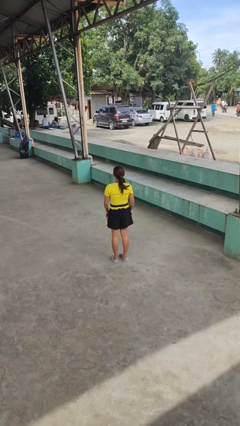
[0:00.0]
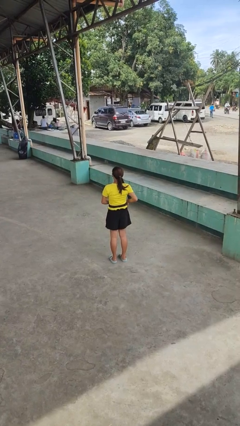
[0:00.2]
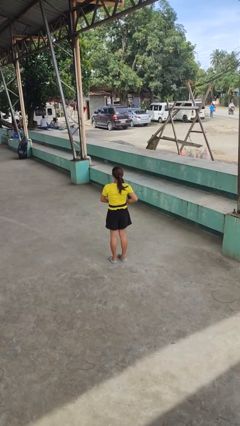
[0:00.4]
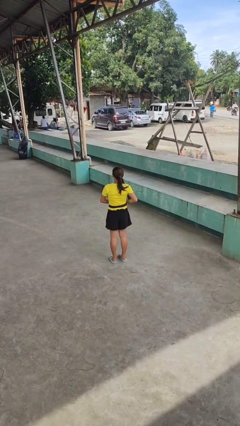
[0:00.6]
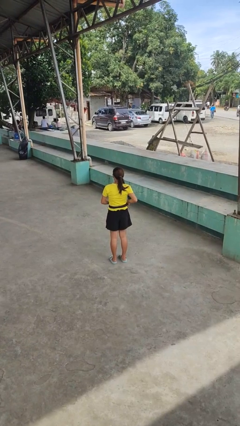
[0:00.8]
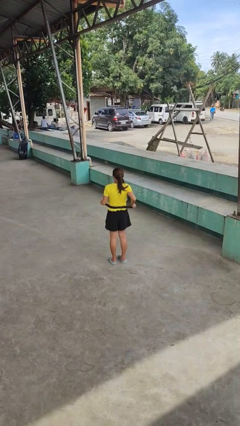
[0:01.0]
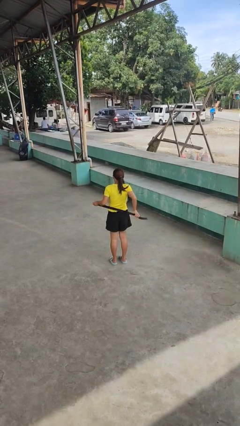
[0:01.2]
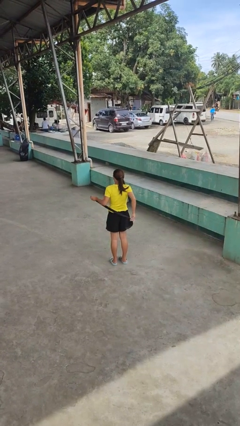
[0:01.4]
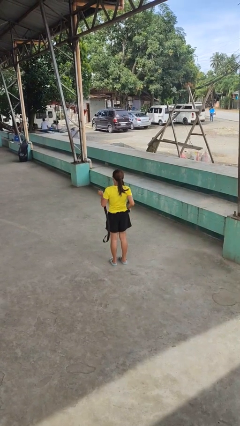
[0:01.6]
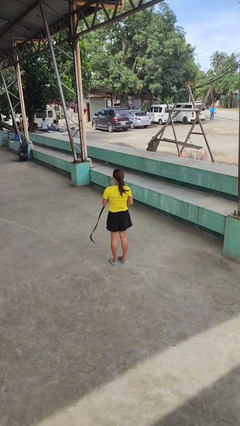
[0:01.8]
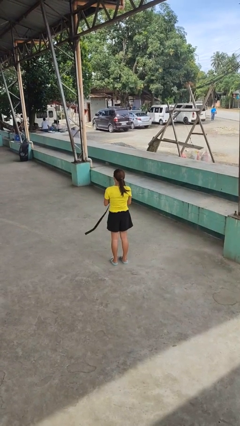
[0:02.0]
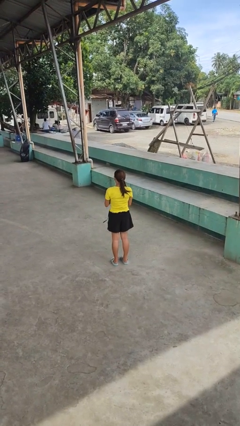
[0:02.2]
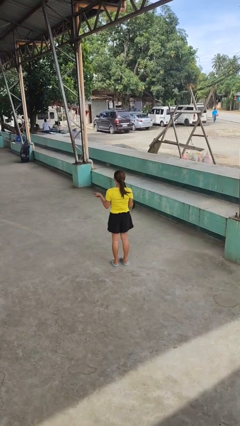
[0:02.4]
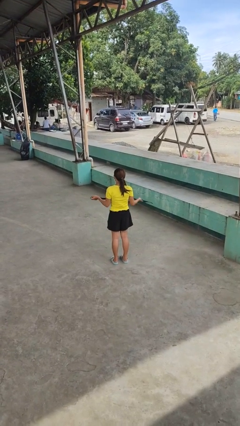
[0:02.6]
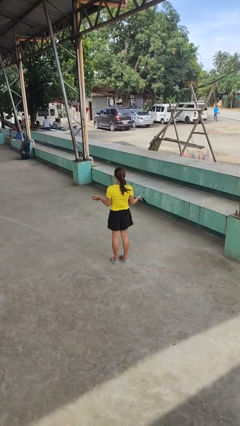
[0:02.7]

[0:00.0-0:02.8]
person takes off belt

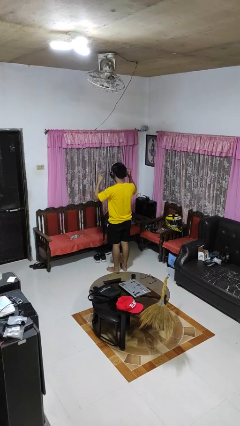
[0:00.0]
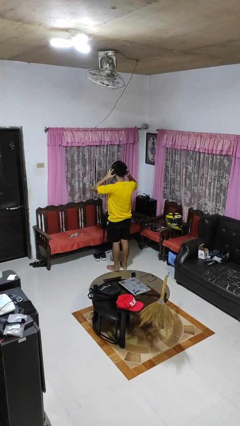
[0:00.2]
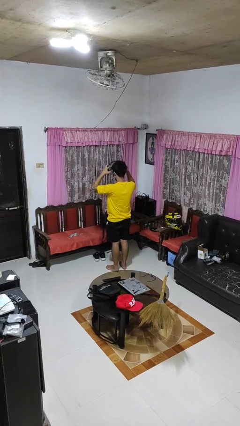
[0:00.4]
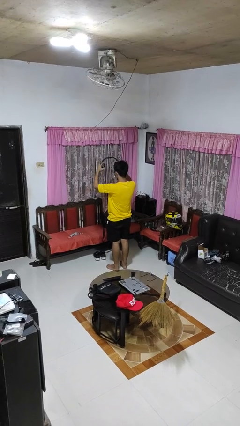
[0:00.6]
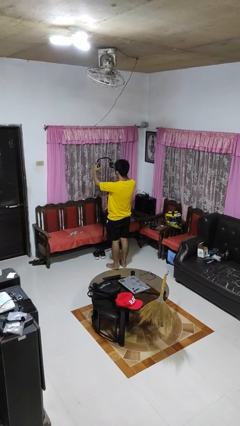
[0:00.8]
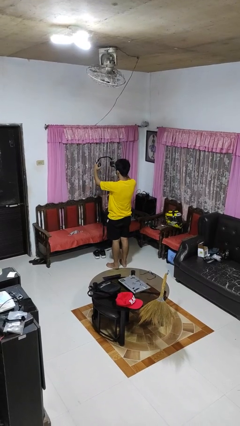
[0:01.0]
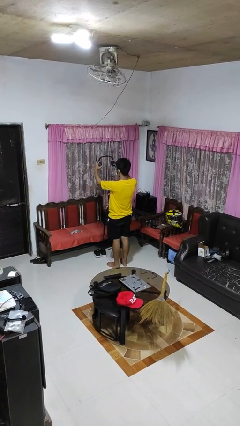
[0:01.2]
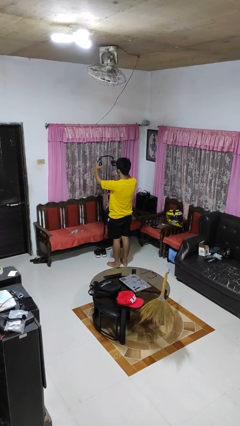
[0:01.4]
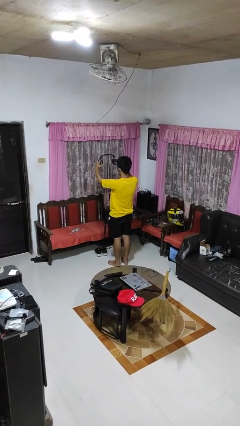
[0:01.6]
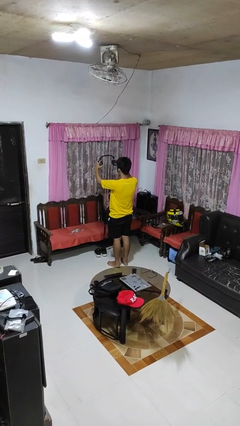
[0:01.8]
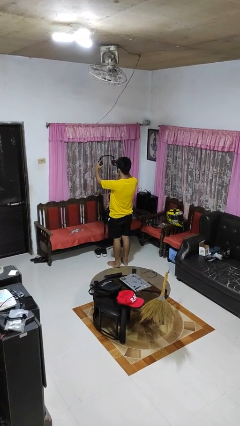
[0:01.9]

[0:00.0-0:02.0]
person takes off headphones

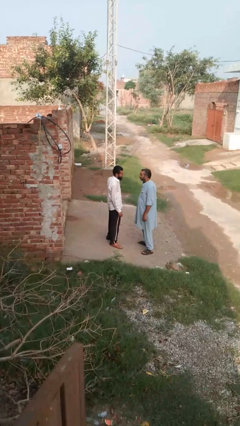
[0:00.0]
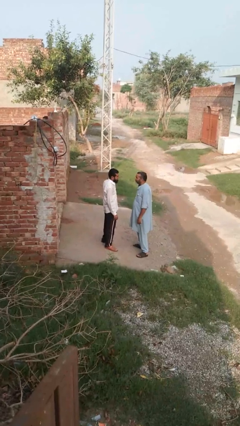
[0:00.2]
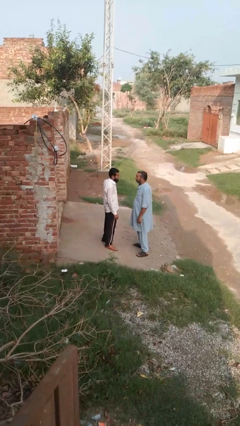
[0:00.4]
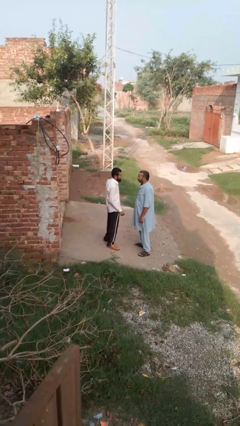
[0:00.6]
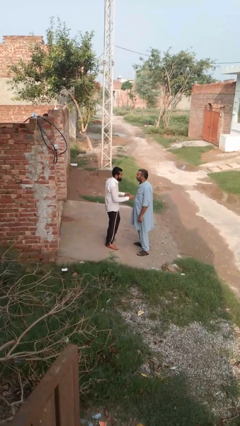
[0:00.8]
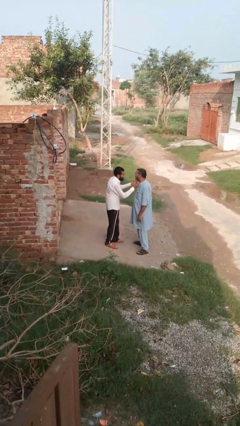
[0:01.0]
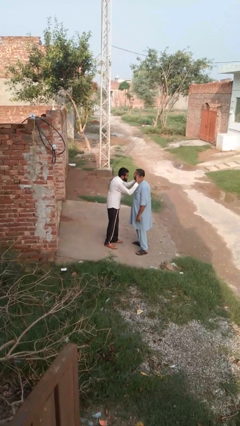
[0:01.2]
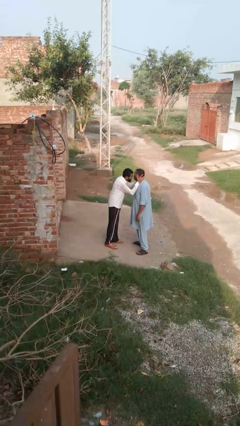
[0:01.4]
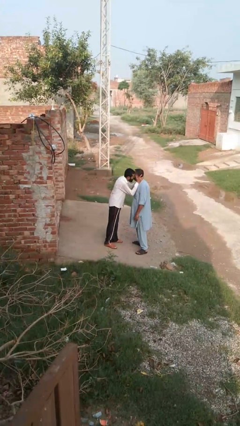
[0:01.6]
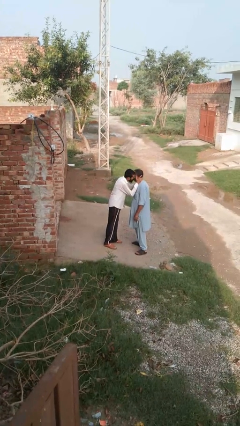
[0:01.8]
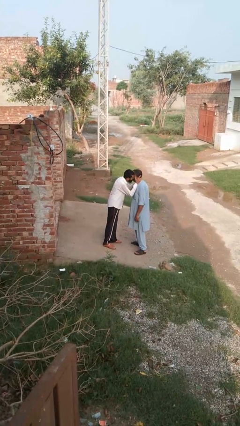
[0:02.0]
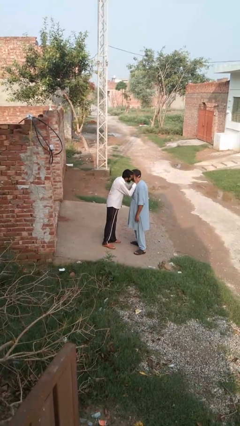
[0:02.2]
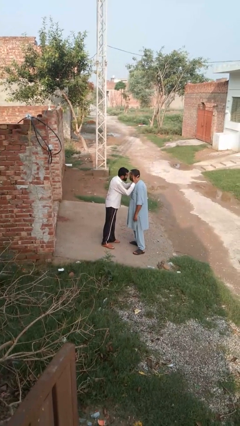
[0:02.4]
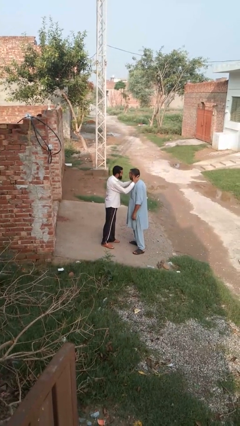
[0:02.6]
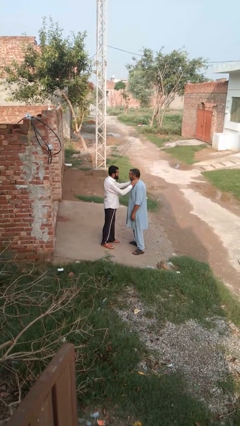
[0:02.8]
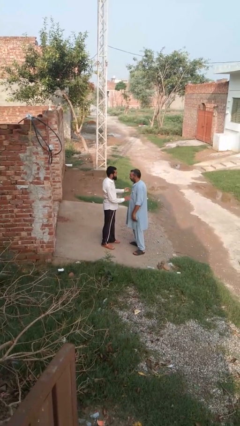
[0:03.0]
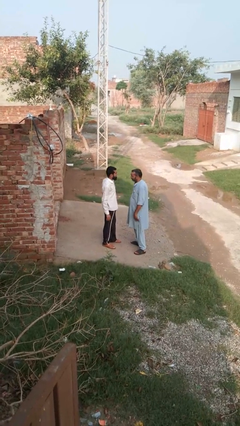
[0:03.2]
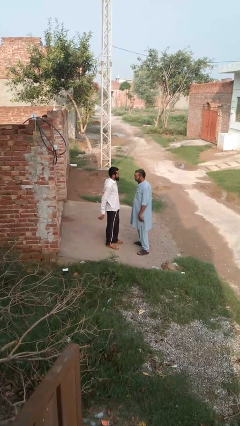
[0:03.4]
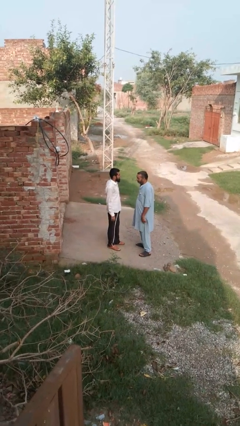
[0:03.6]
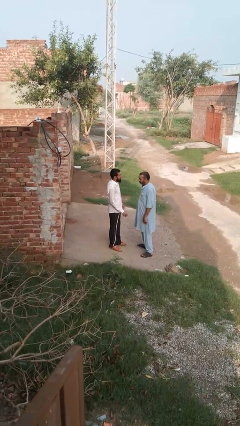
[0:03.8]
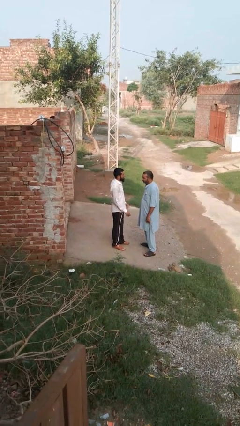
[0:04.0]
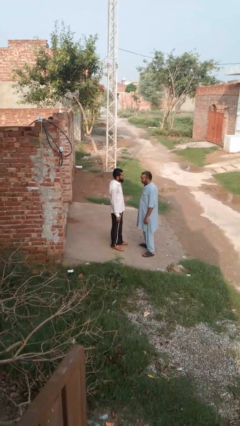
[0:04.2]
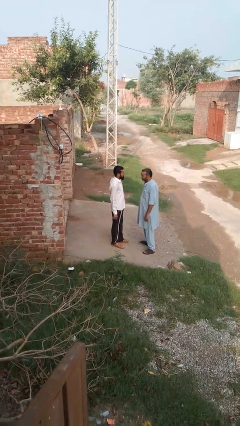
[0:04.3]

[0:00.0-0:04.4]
person kisses cheek of person

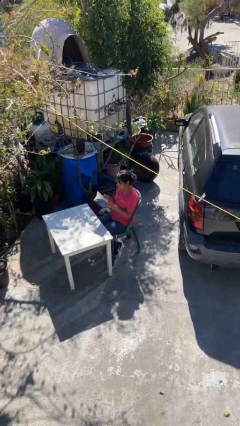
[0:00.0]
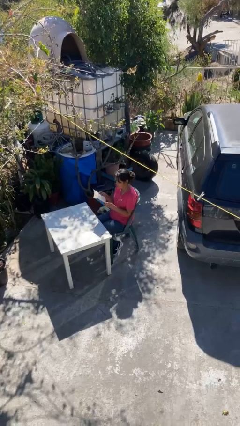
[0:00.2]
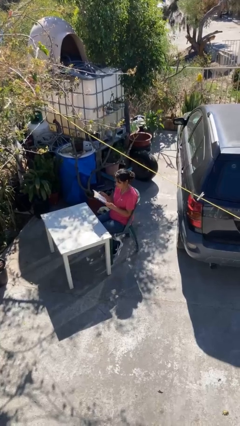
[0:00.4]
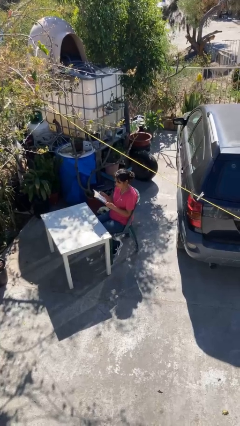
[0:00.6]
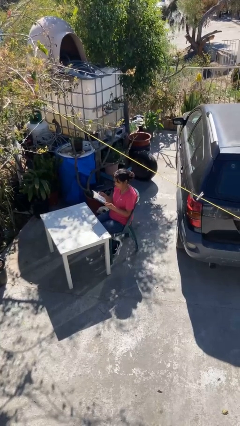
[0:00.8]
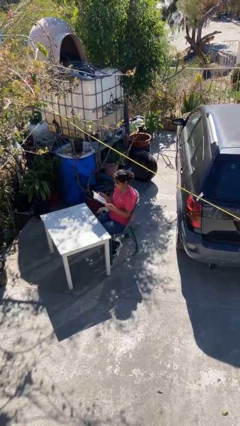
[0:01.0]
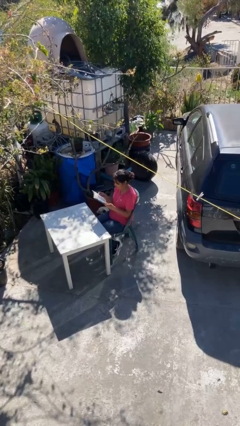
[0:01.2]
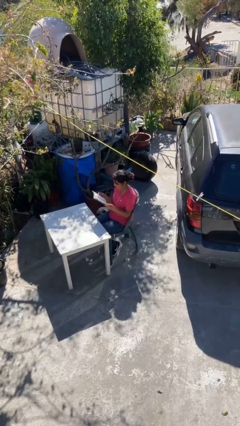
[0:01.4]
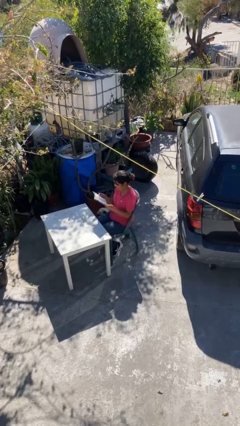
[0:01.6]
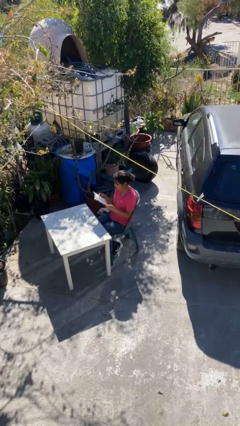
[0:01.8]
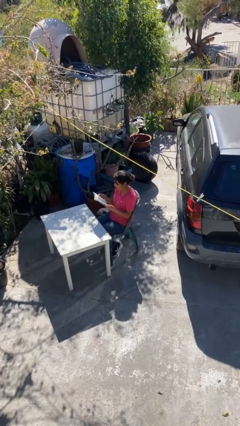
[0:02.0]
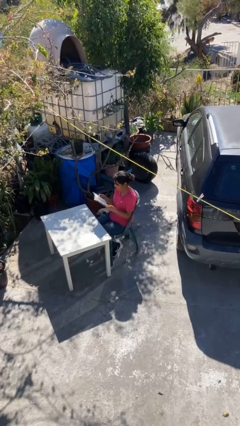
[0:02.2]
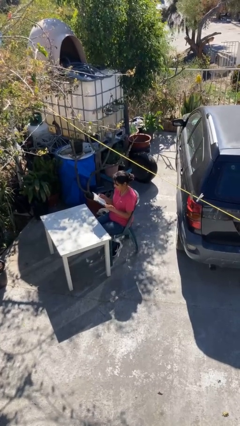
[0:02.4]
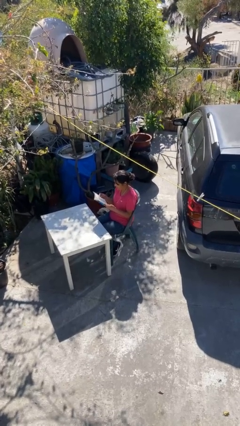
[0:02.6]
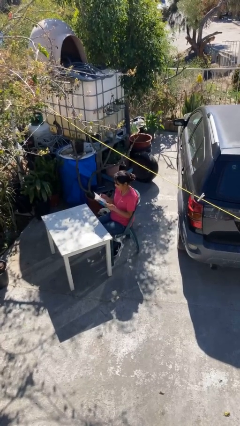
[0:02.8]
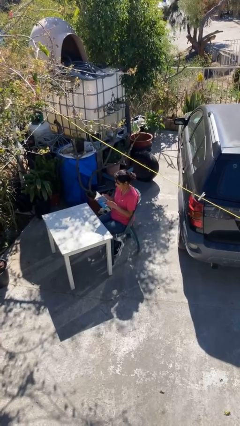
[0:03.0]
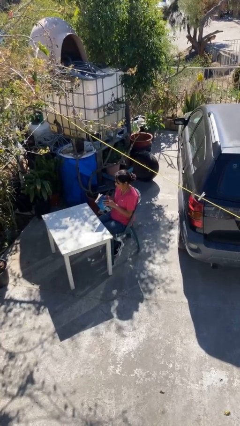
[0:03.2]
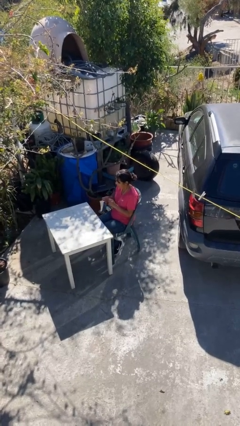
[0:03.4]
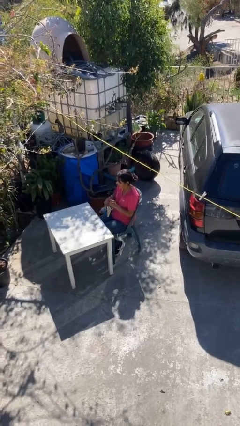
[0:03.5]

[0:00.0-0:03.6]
person reads document

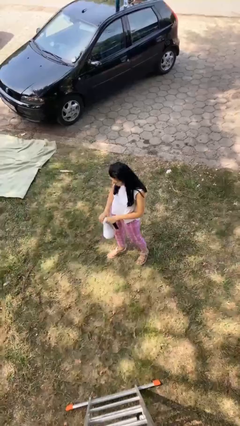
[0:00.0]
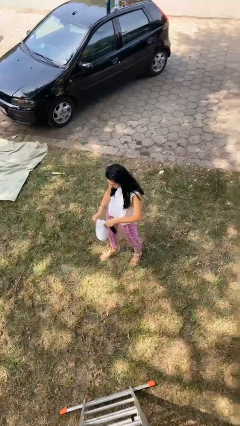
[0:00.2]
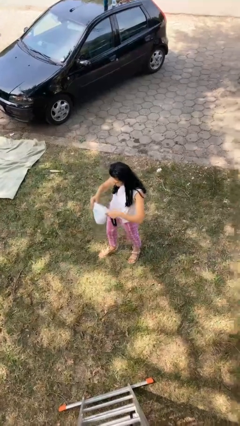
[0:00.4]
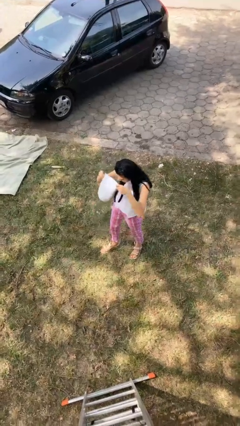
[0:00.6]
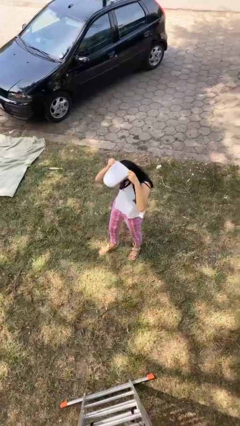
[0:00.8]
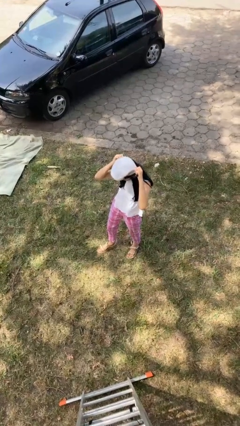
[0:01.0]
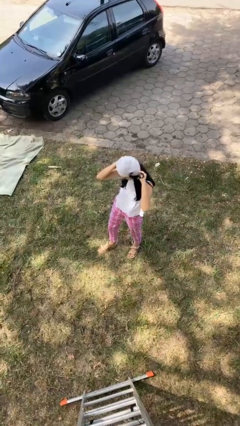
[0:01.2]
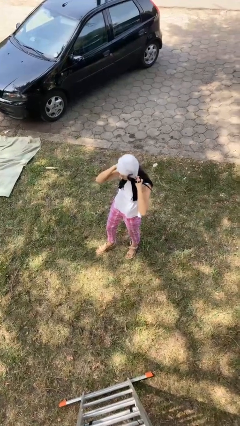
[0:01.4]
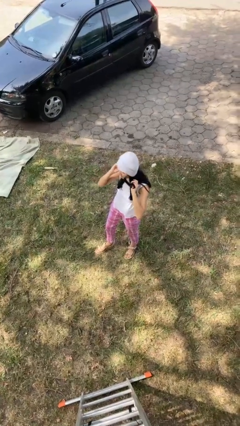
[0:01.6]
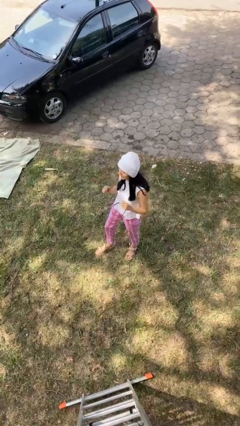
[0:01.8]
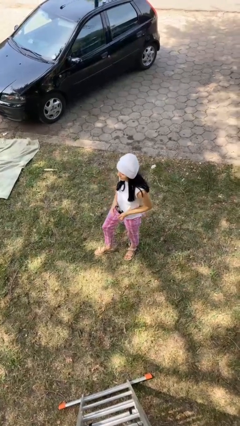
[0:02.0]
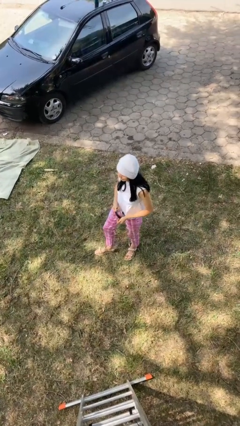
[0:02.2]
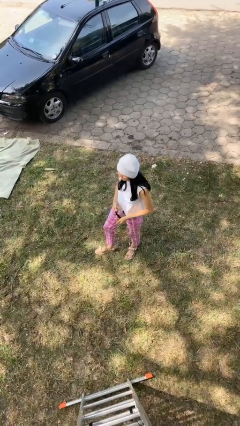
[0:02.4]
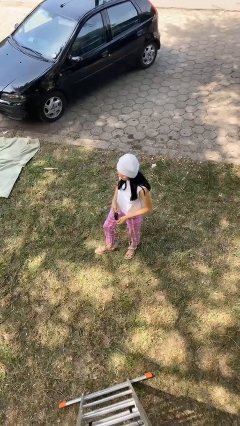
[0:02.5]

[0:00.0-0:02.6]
person puts on hat

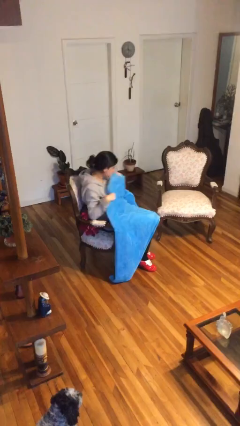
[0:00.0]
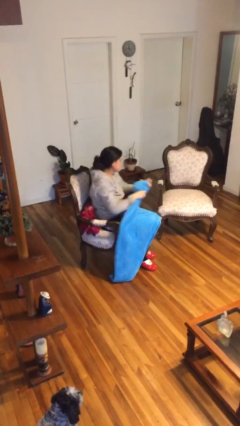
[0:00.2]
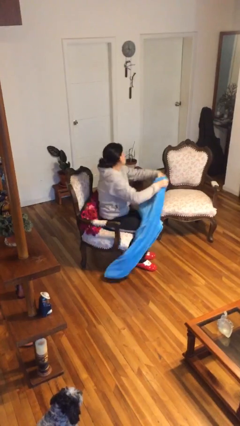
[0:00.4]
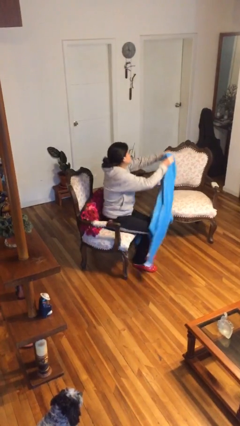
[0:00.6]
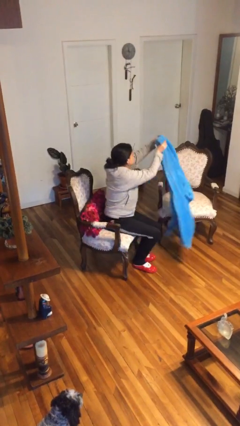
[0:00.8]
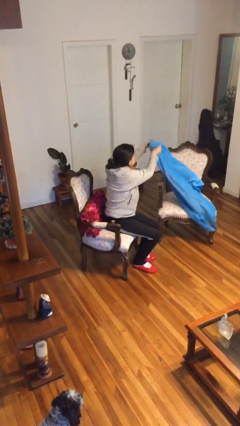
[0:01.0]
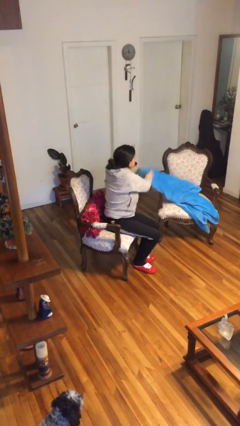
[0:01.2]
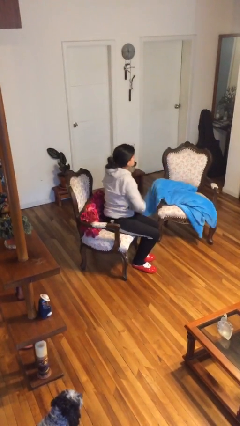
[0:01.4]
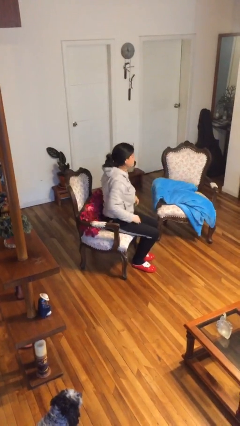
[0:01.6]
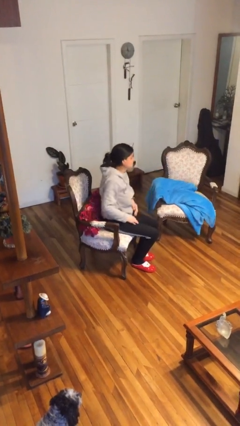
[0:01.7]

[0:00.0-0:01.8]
person uncovers with blanket
